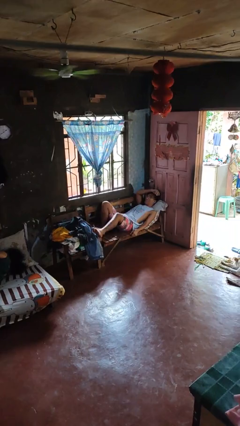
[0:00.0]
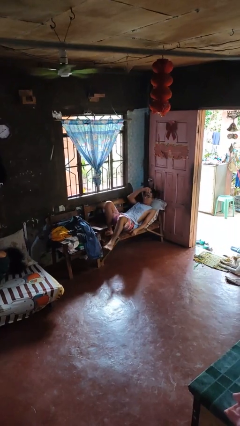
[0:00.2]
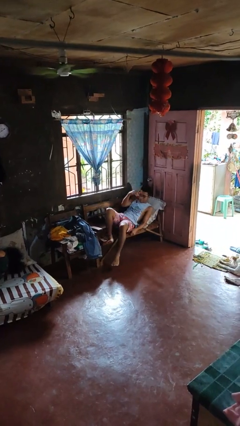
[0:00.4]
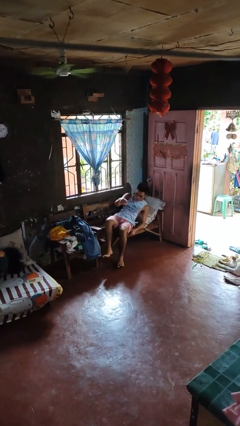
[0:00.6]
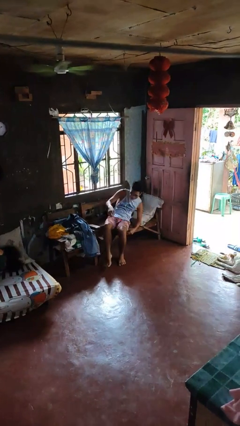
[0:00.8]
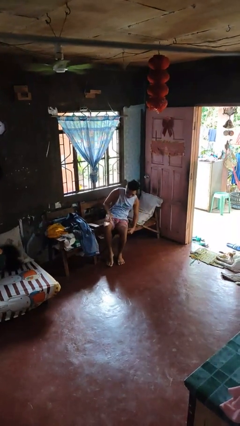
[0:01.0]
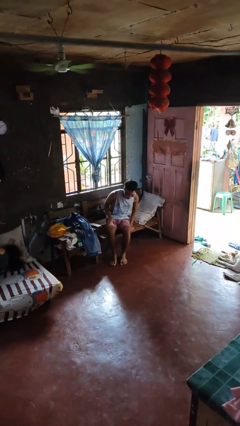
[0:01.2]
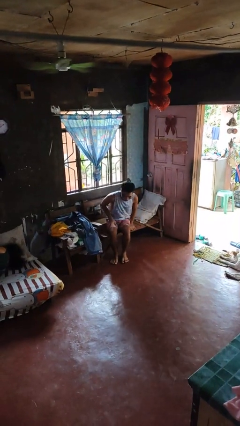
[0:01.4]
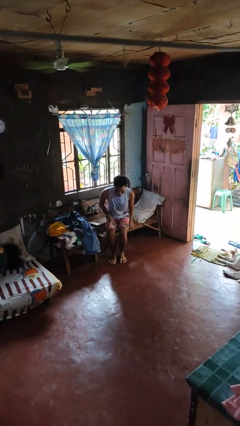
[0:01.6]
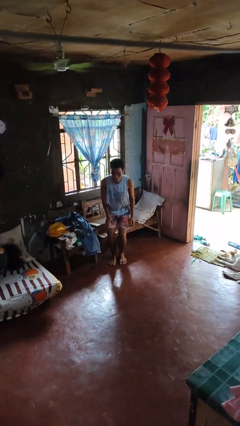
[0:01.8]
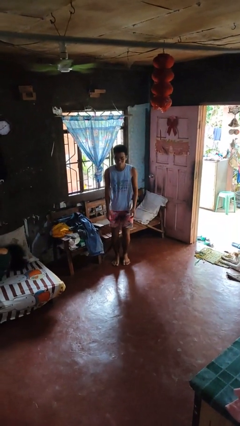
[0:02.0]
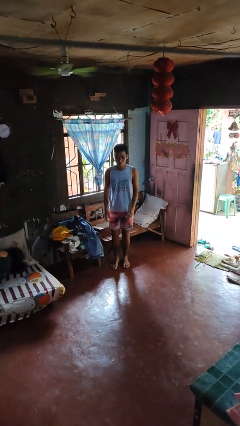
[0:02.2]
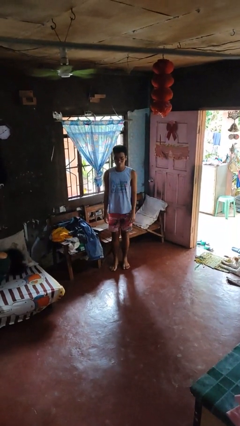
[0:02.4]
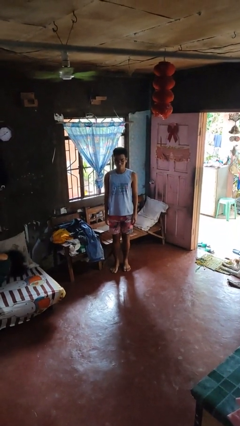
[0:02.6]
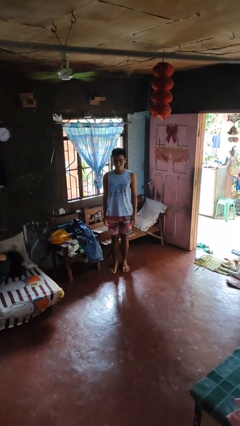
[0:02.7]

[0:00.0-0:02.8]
person stands up

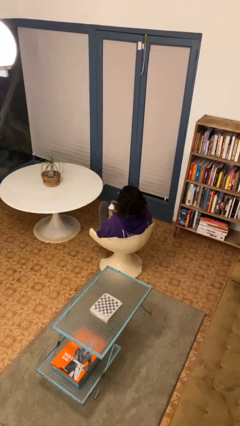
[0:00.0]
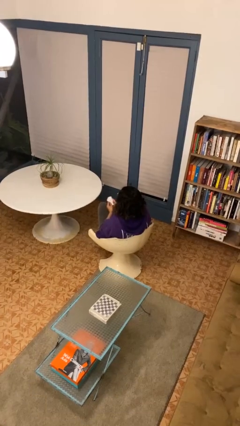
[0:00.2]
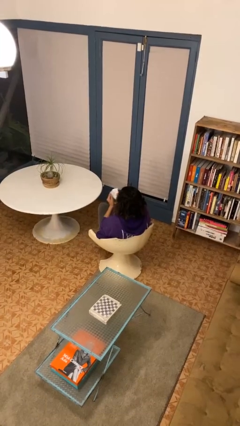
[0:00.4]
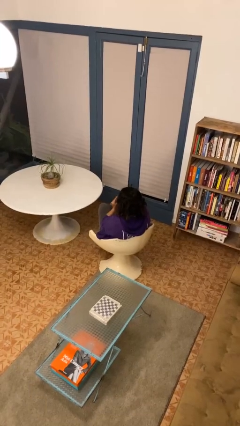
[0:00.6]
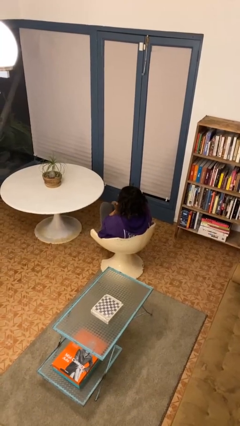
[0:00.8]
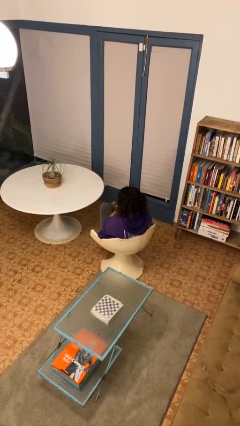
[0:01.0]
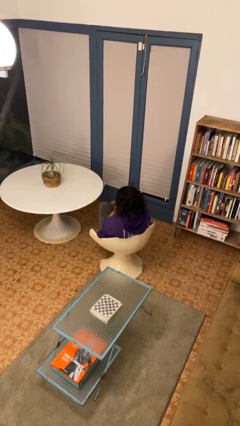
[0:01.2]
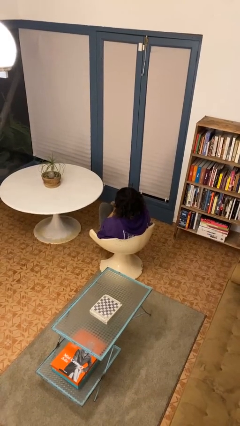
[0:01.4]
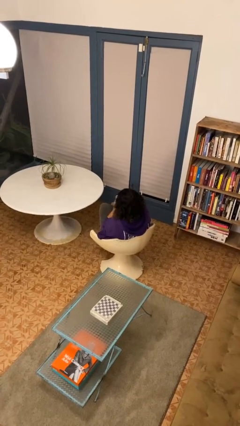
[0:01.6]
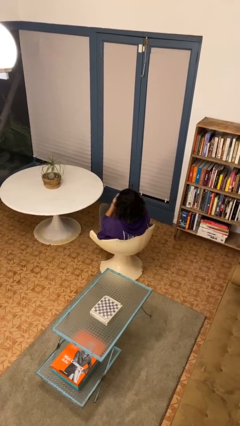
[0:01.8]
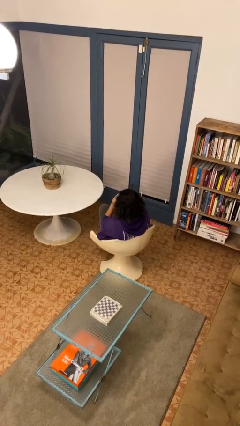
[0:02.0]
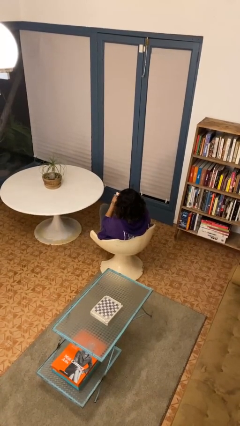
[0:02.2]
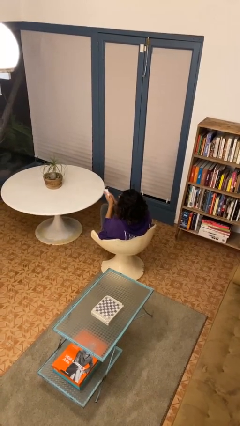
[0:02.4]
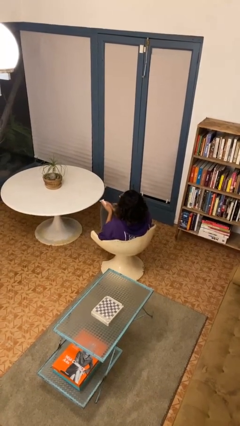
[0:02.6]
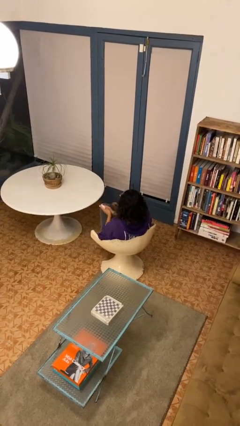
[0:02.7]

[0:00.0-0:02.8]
person blows nose

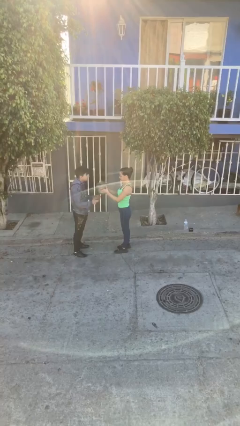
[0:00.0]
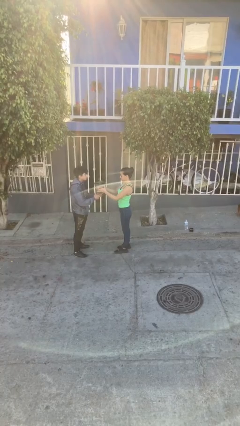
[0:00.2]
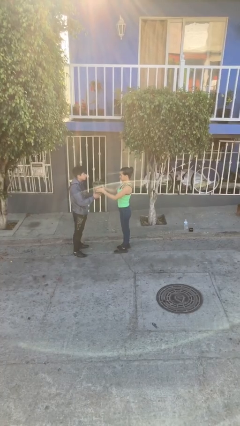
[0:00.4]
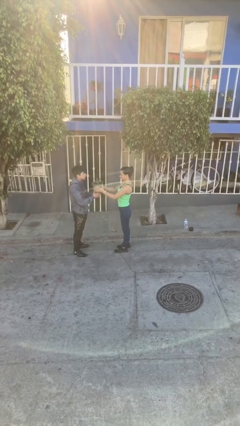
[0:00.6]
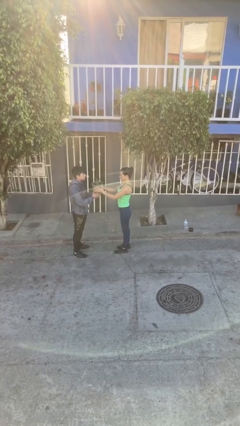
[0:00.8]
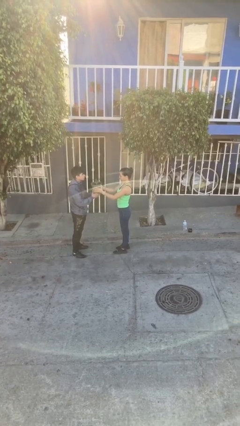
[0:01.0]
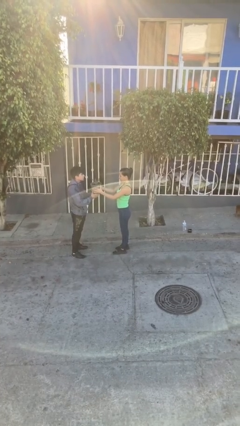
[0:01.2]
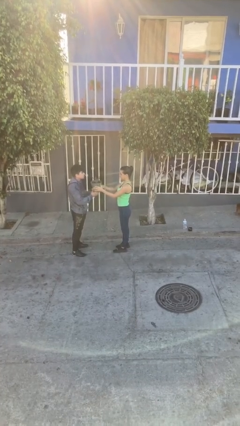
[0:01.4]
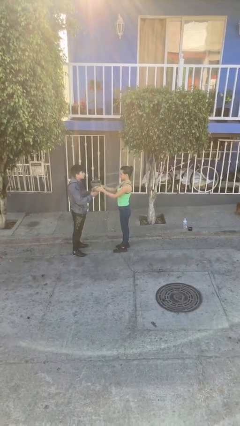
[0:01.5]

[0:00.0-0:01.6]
person transfers object to person

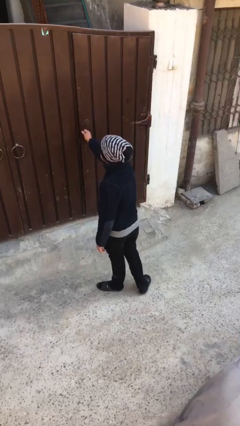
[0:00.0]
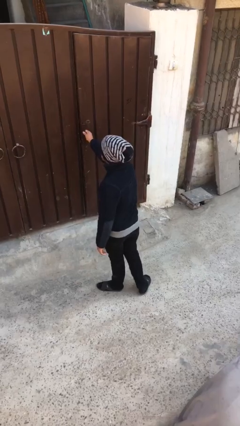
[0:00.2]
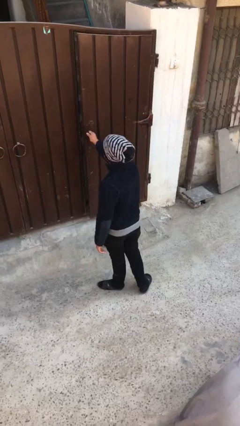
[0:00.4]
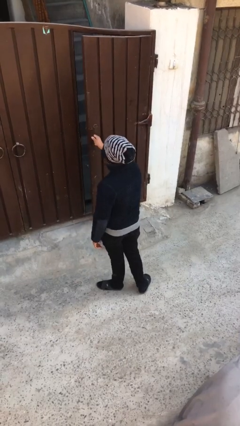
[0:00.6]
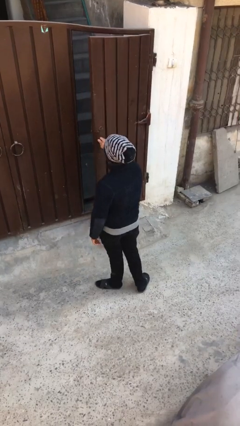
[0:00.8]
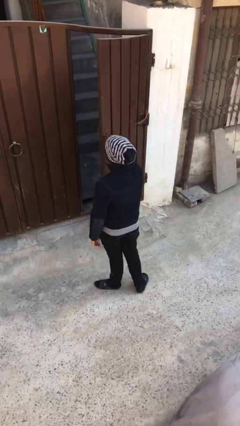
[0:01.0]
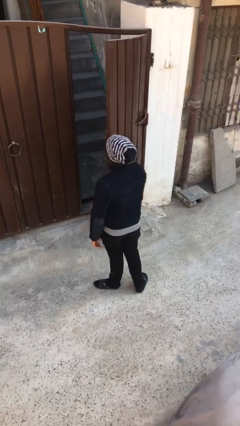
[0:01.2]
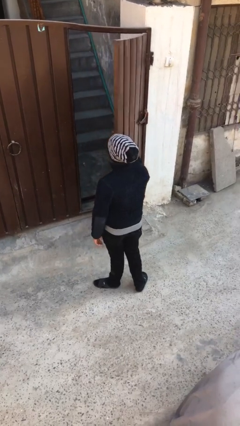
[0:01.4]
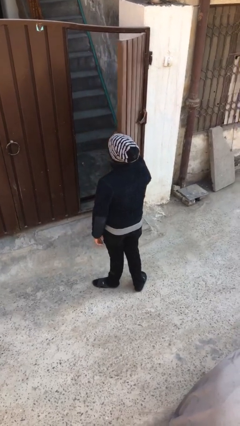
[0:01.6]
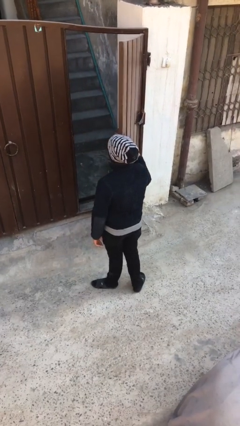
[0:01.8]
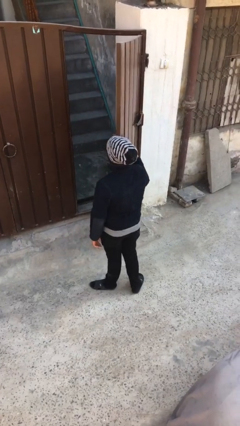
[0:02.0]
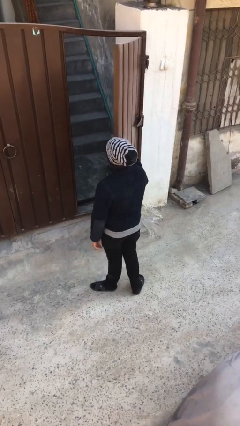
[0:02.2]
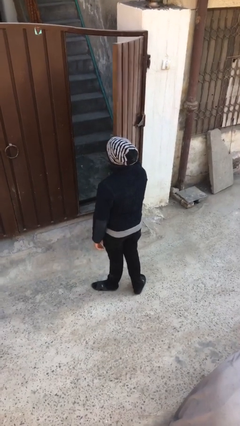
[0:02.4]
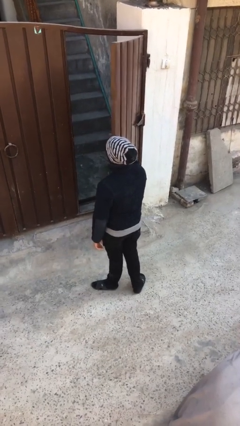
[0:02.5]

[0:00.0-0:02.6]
person opens facility door

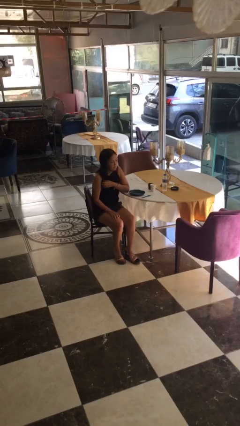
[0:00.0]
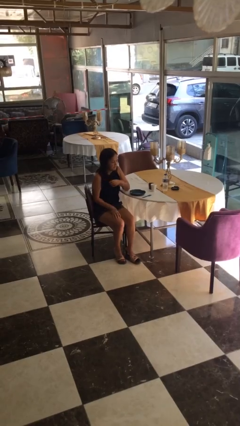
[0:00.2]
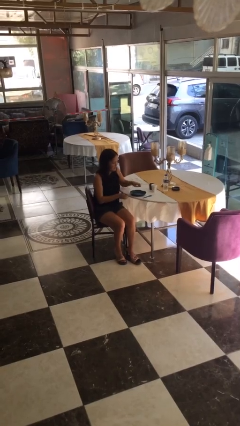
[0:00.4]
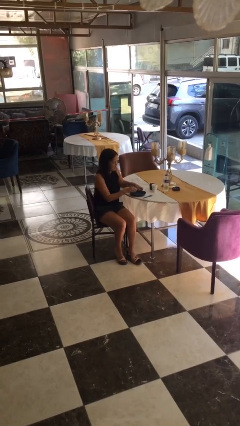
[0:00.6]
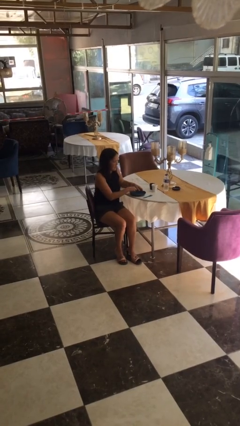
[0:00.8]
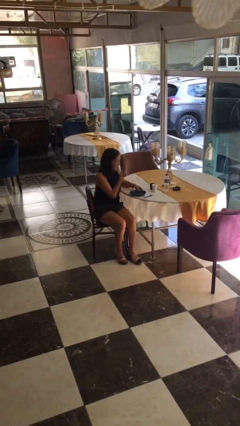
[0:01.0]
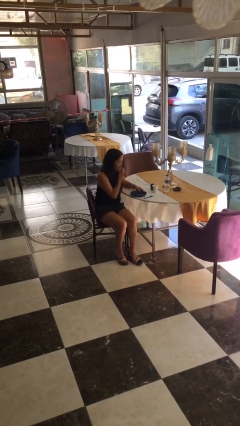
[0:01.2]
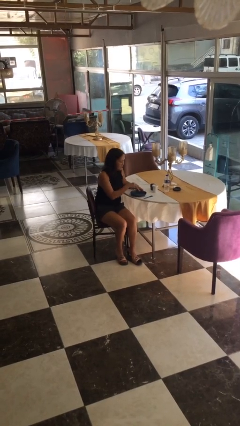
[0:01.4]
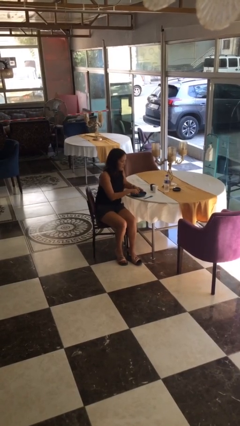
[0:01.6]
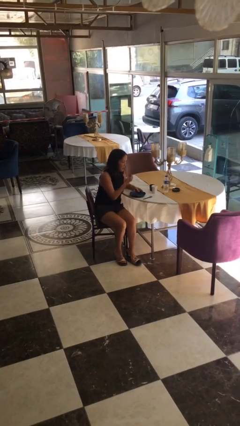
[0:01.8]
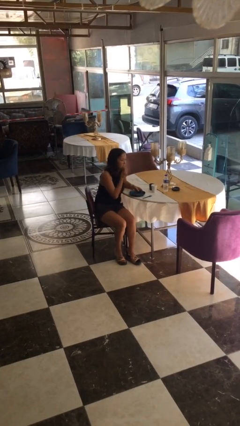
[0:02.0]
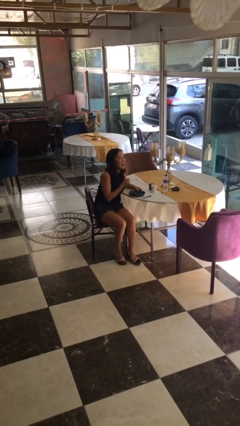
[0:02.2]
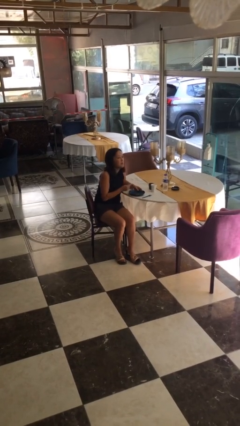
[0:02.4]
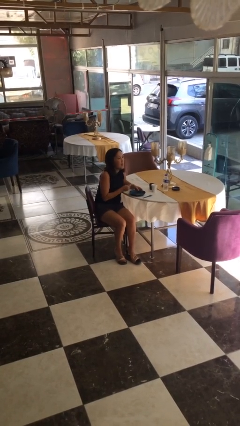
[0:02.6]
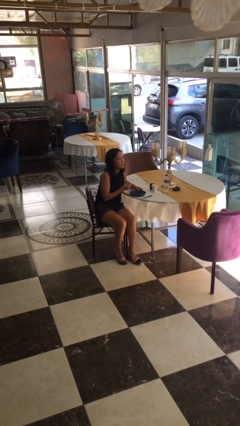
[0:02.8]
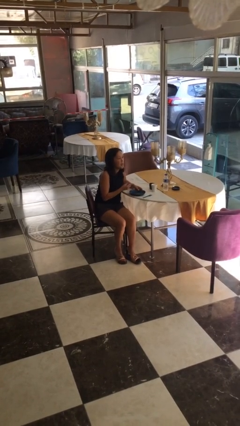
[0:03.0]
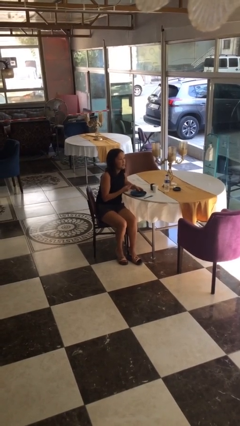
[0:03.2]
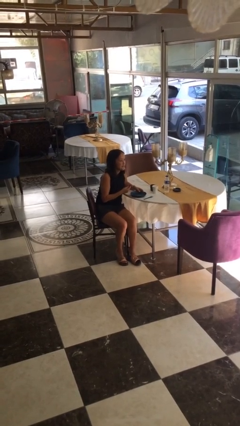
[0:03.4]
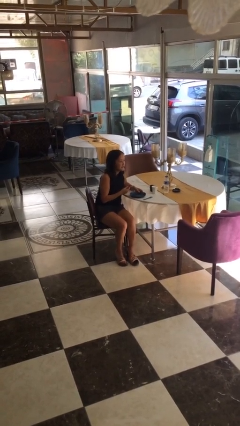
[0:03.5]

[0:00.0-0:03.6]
person eats with hands

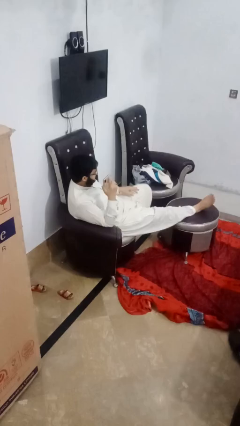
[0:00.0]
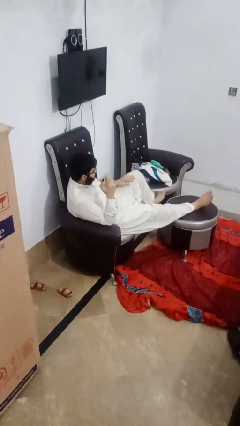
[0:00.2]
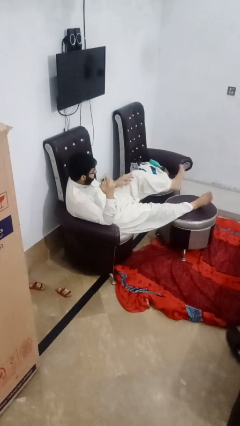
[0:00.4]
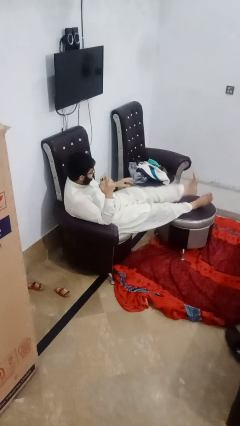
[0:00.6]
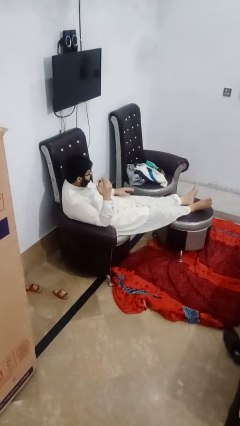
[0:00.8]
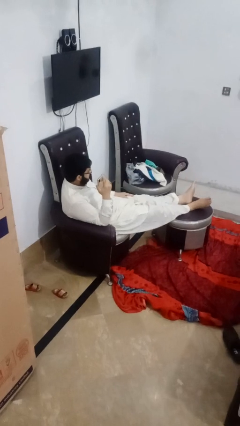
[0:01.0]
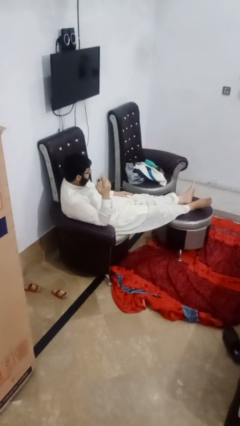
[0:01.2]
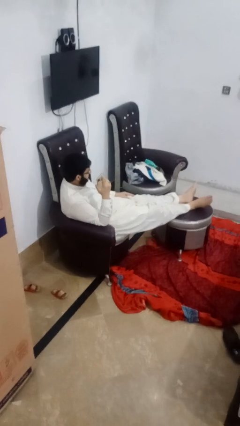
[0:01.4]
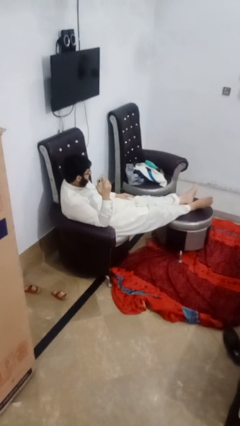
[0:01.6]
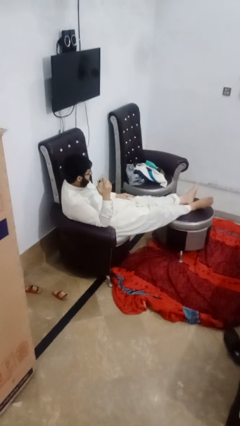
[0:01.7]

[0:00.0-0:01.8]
person puts feet up

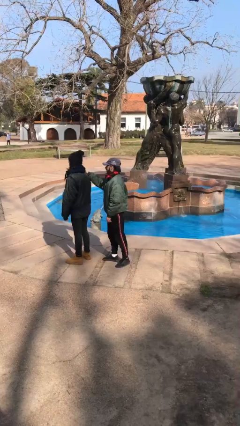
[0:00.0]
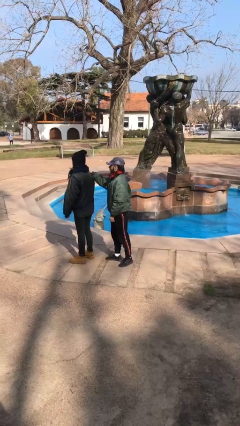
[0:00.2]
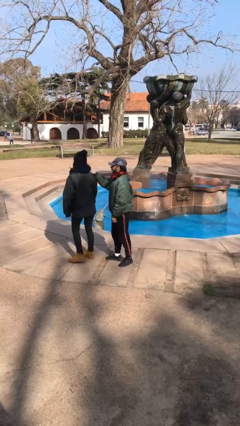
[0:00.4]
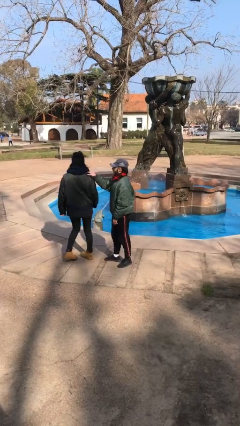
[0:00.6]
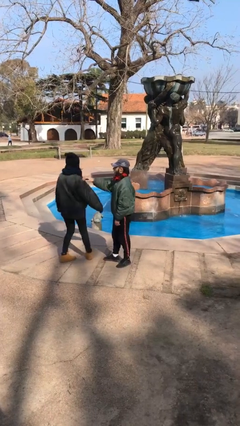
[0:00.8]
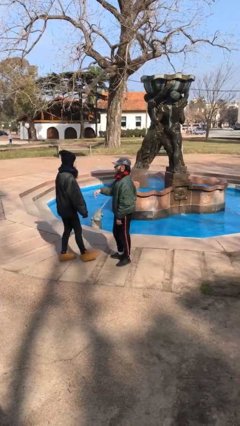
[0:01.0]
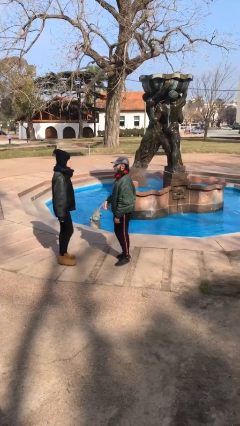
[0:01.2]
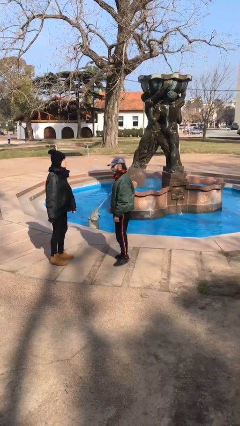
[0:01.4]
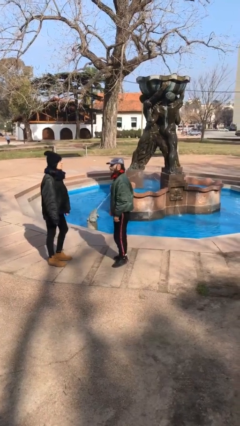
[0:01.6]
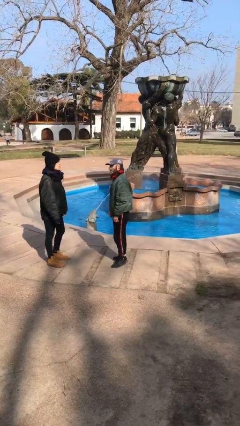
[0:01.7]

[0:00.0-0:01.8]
person spins person around
